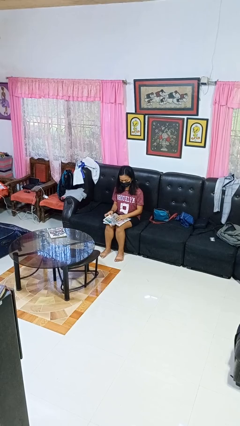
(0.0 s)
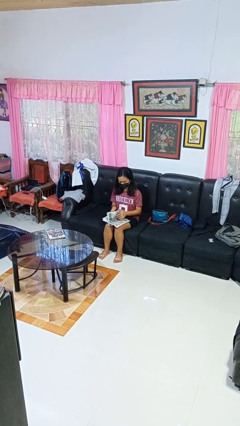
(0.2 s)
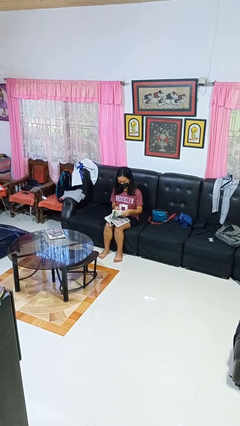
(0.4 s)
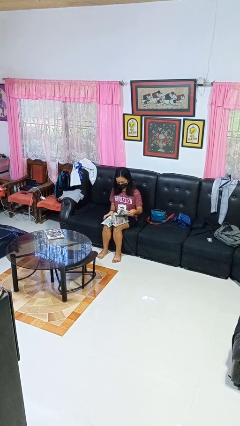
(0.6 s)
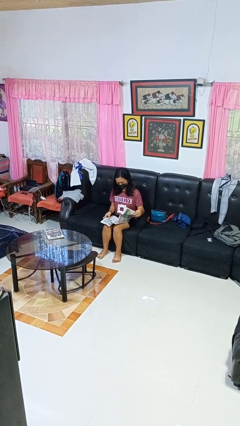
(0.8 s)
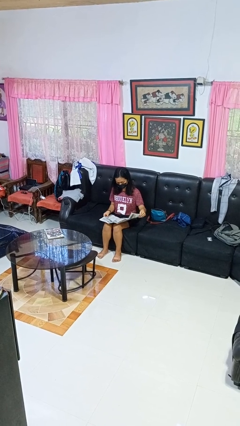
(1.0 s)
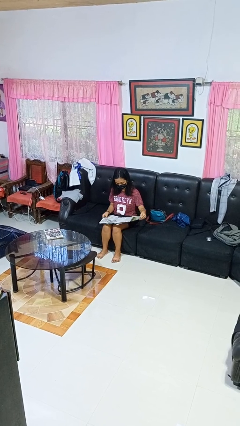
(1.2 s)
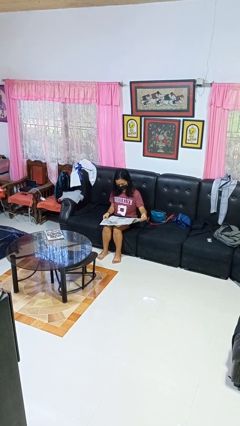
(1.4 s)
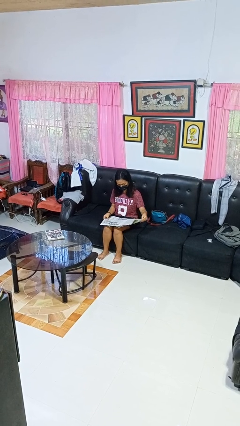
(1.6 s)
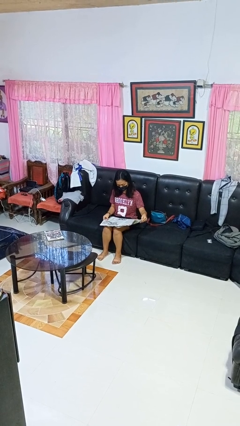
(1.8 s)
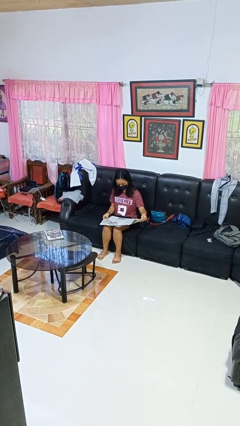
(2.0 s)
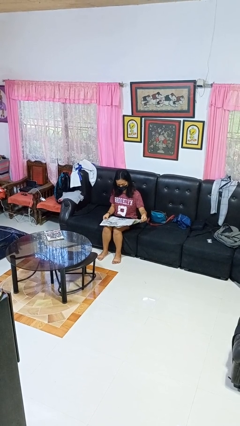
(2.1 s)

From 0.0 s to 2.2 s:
person reads newspaper

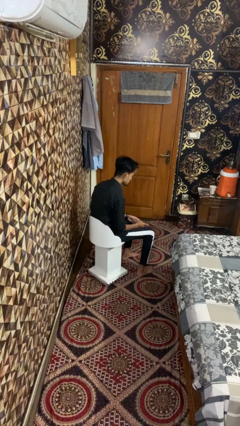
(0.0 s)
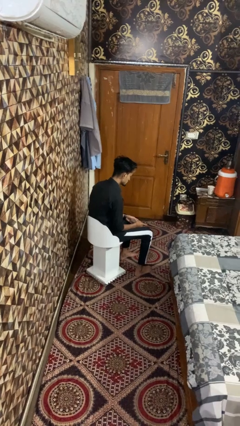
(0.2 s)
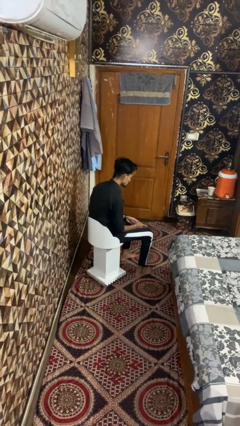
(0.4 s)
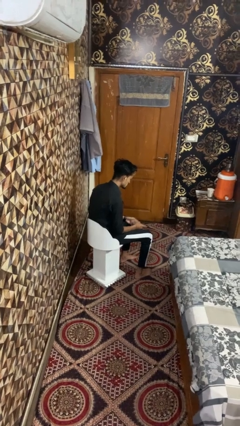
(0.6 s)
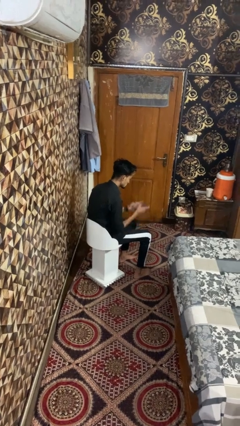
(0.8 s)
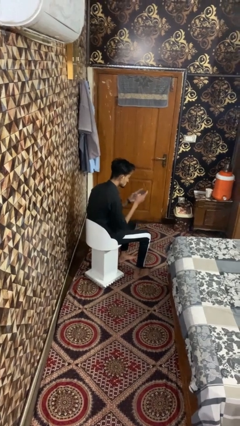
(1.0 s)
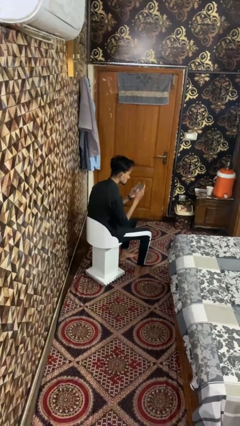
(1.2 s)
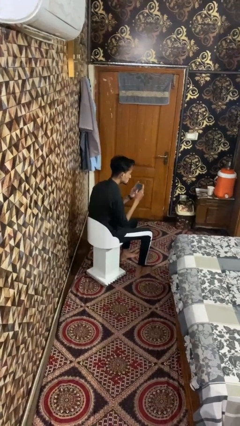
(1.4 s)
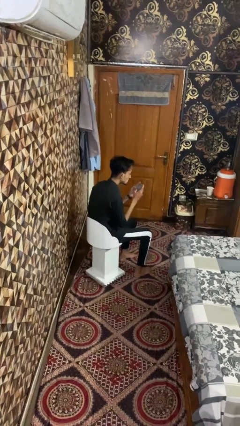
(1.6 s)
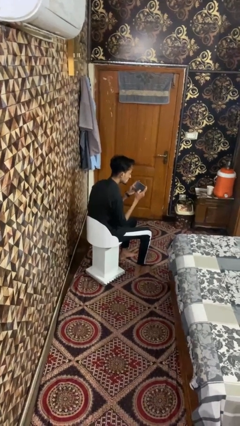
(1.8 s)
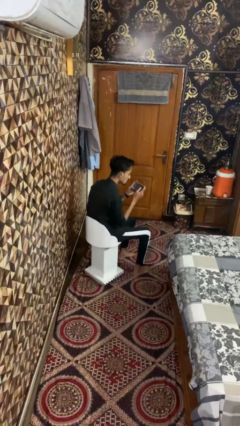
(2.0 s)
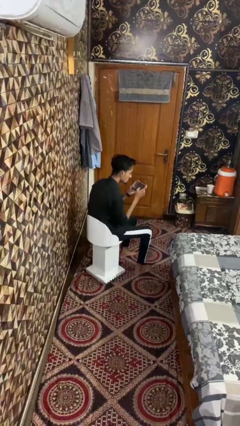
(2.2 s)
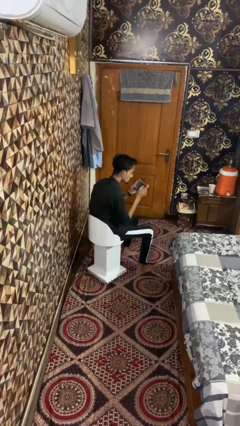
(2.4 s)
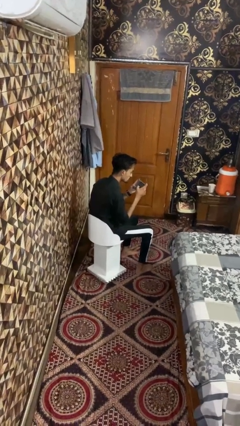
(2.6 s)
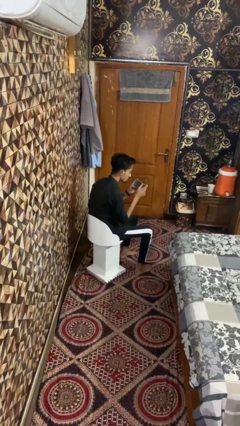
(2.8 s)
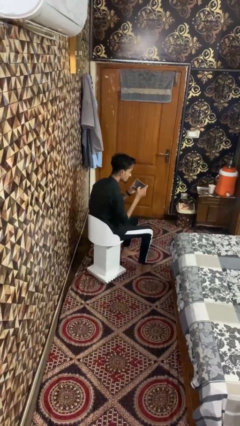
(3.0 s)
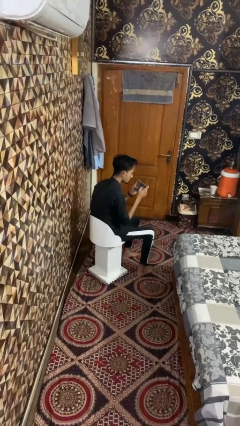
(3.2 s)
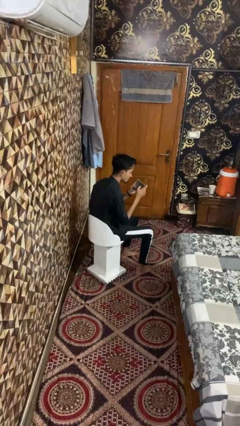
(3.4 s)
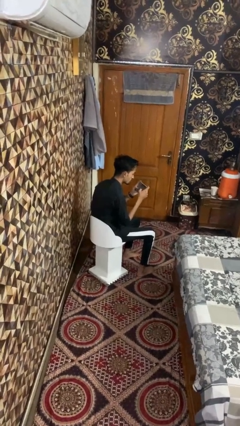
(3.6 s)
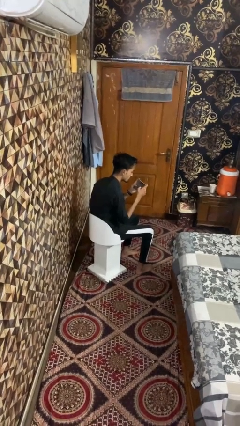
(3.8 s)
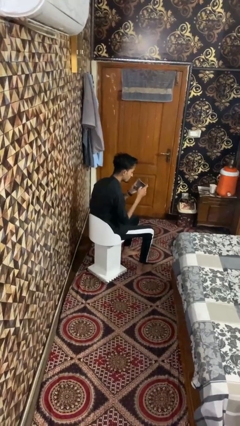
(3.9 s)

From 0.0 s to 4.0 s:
person taps object with finger

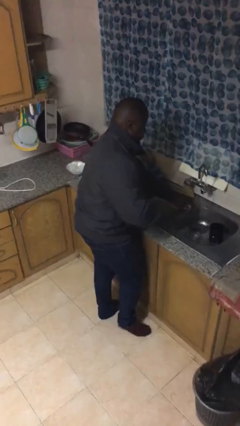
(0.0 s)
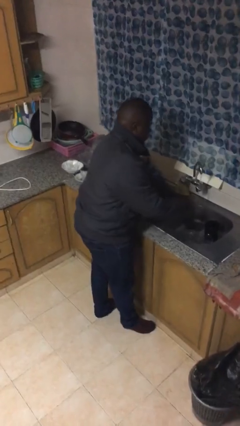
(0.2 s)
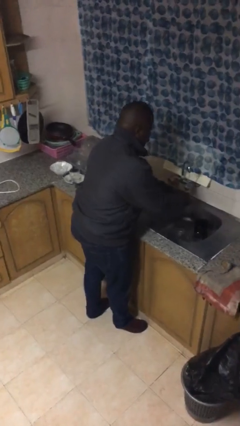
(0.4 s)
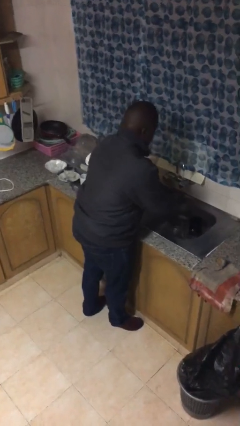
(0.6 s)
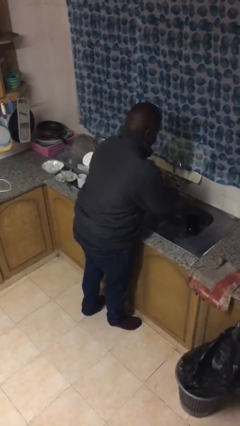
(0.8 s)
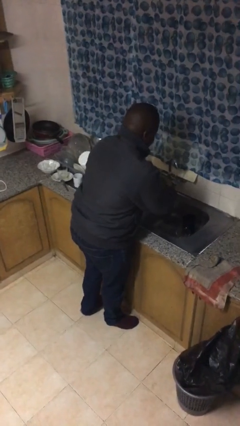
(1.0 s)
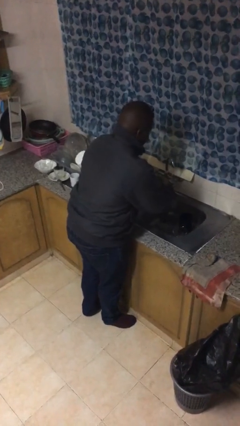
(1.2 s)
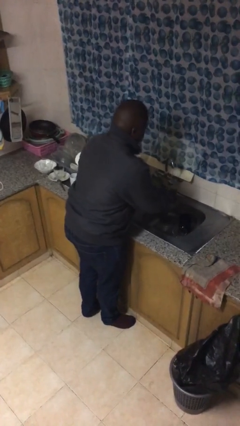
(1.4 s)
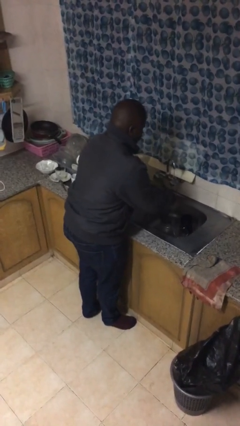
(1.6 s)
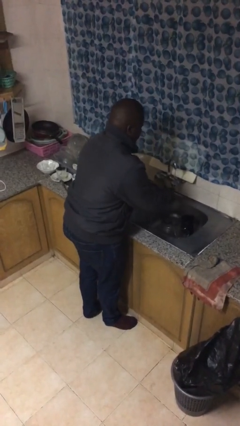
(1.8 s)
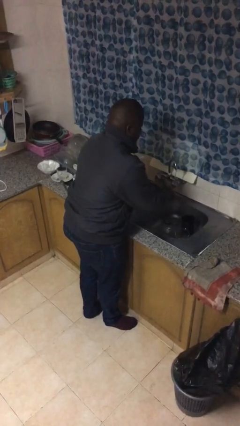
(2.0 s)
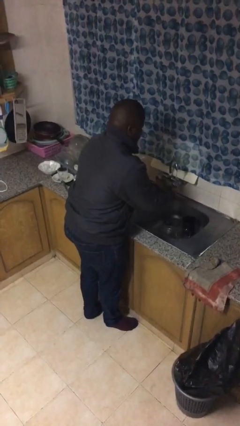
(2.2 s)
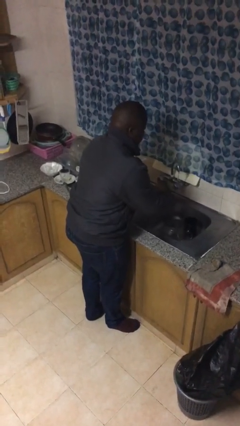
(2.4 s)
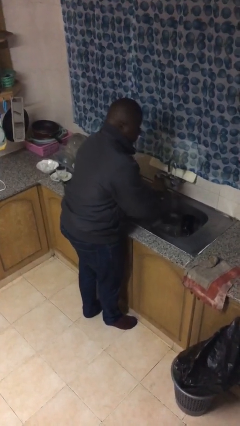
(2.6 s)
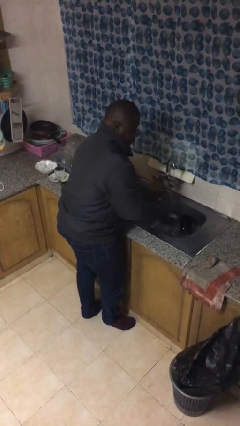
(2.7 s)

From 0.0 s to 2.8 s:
person washes hands

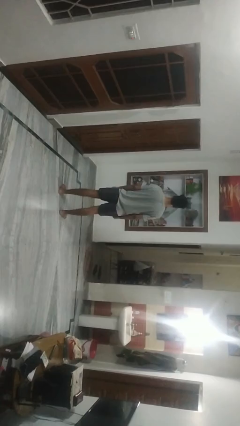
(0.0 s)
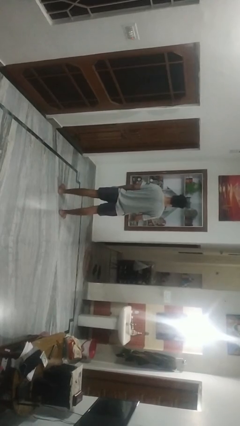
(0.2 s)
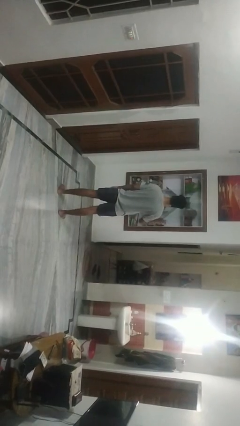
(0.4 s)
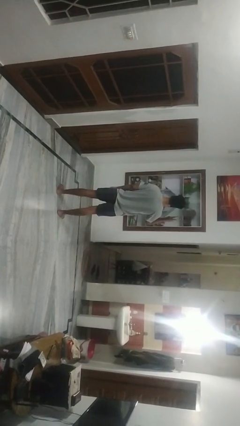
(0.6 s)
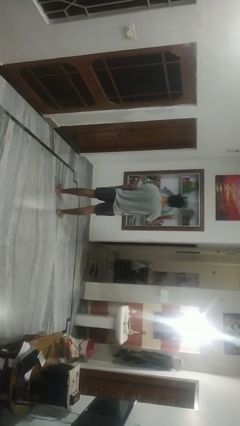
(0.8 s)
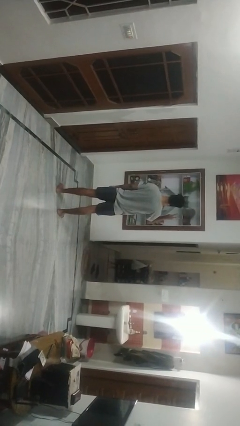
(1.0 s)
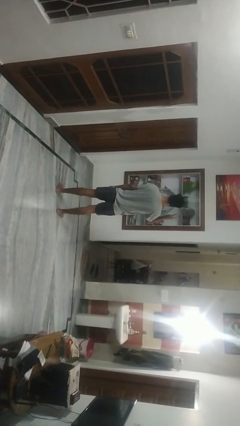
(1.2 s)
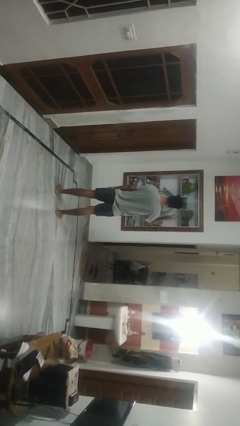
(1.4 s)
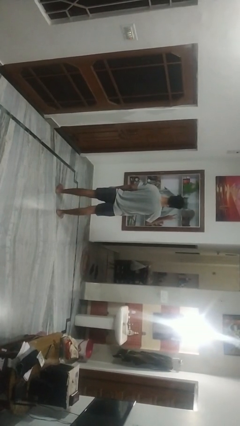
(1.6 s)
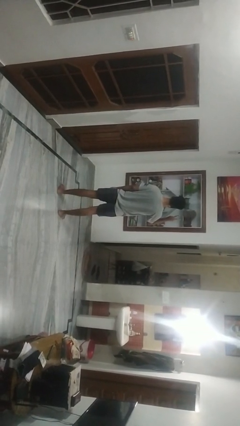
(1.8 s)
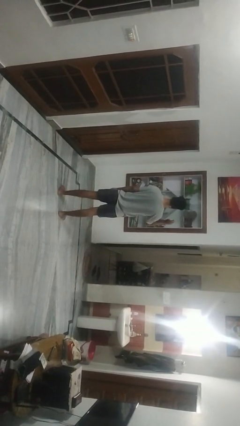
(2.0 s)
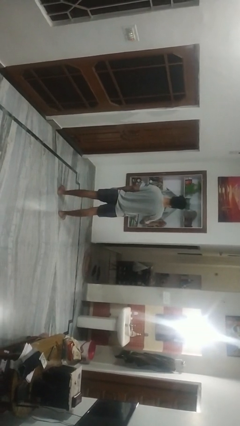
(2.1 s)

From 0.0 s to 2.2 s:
person gestures peace

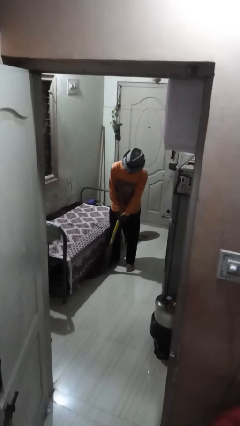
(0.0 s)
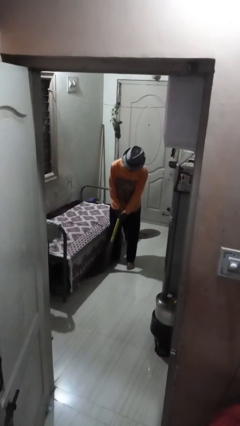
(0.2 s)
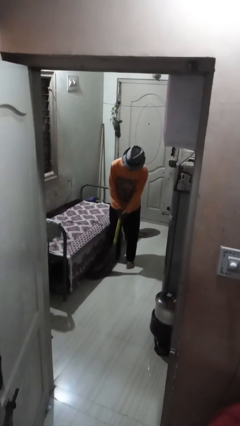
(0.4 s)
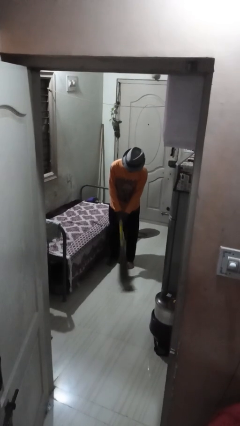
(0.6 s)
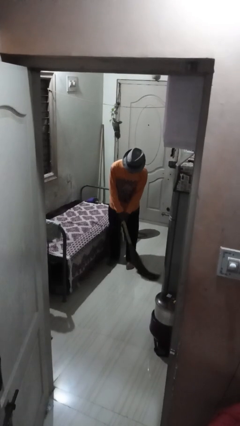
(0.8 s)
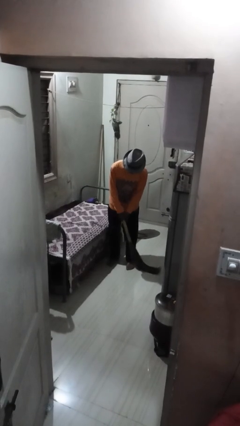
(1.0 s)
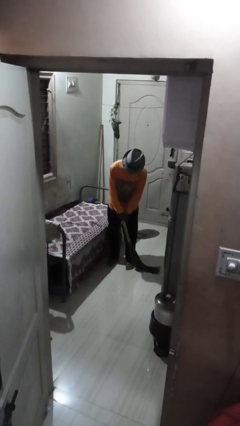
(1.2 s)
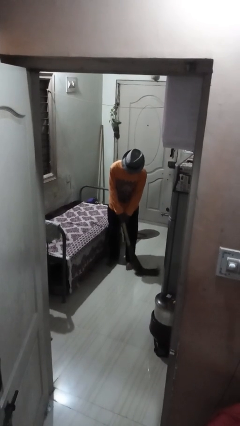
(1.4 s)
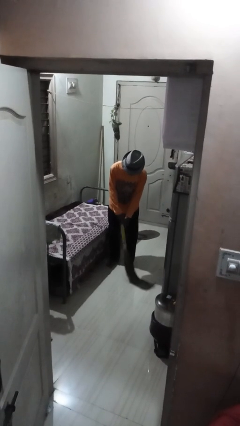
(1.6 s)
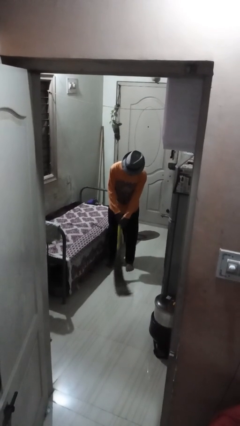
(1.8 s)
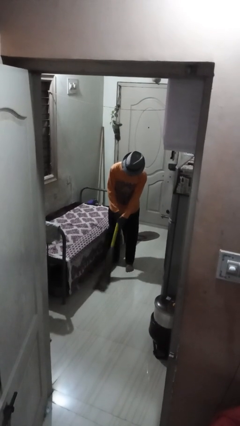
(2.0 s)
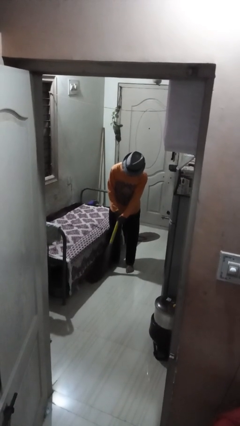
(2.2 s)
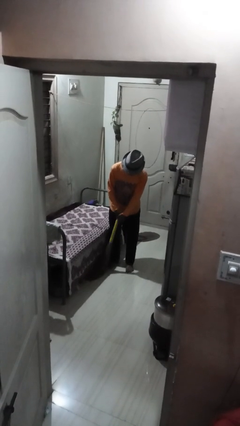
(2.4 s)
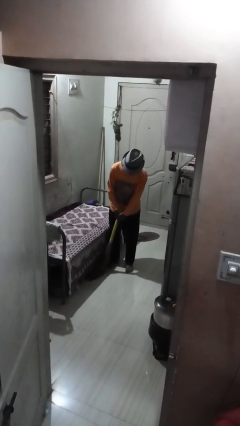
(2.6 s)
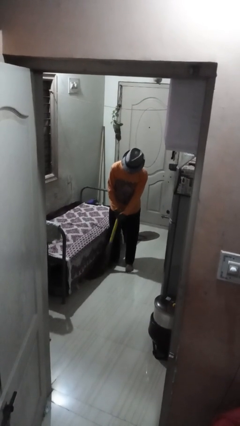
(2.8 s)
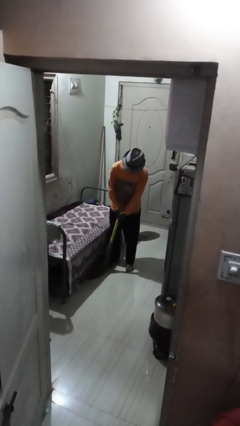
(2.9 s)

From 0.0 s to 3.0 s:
person sweeps floor

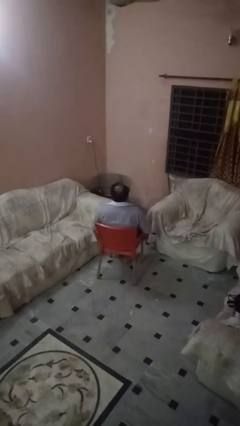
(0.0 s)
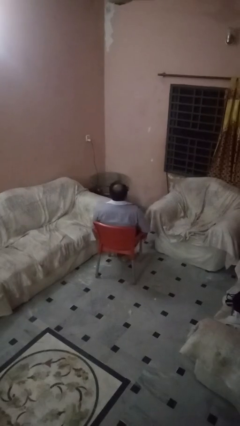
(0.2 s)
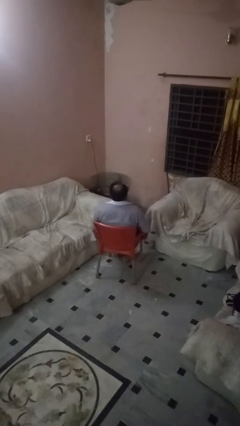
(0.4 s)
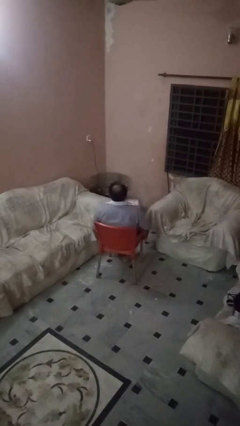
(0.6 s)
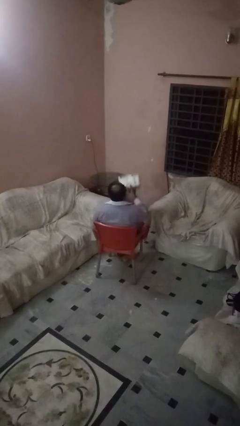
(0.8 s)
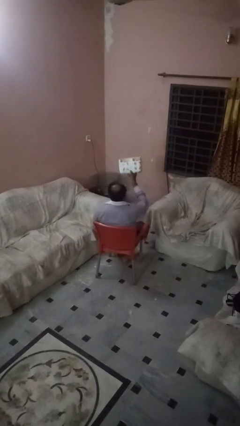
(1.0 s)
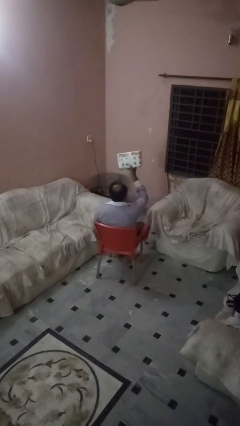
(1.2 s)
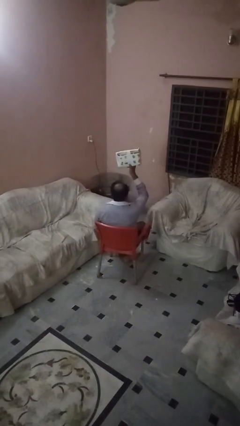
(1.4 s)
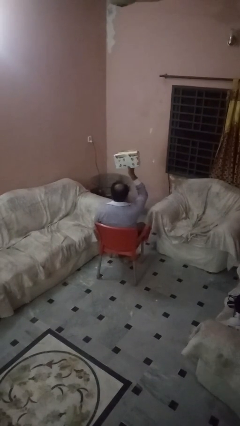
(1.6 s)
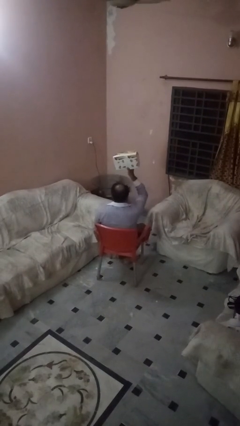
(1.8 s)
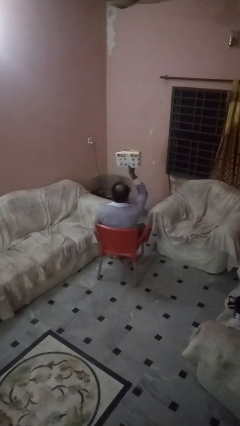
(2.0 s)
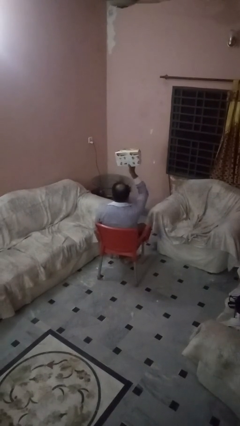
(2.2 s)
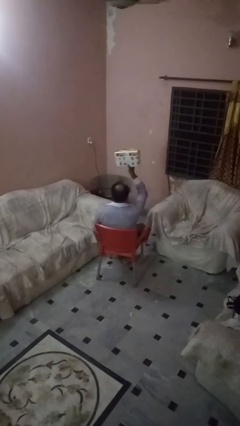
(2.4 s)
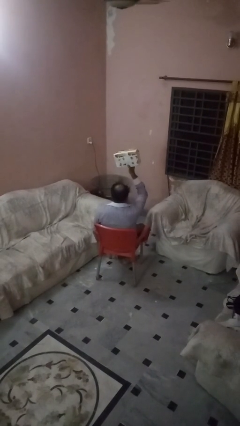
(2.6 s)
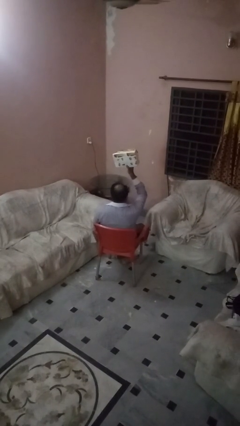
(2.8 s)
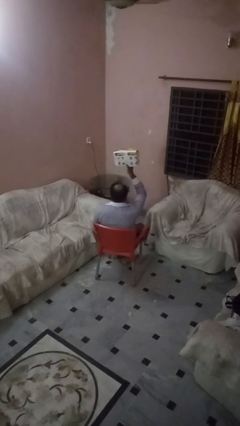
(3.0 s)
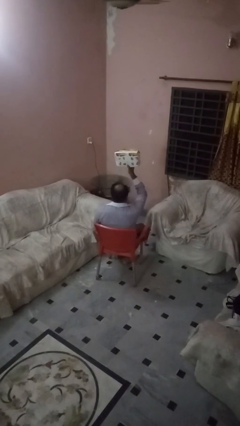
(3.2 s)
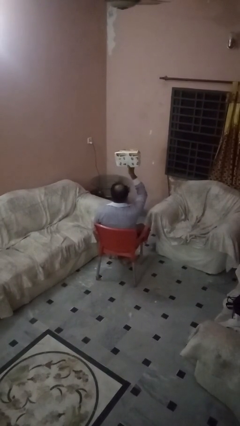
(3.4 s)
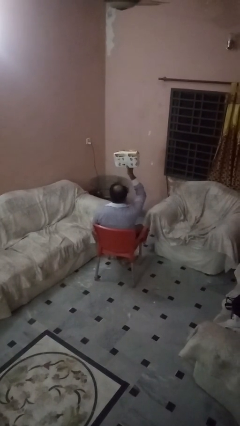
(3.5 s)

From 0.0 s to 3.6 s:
person holds object above head
